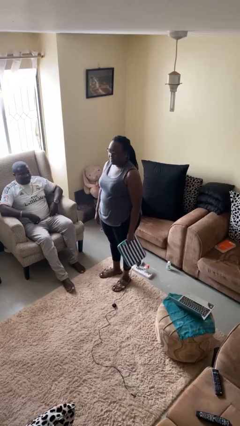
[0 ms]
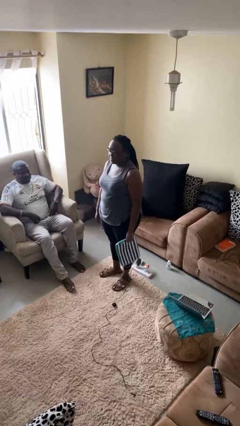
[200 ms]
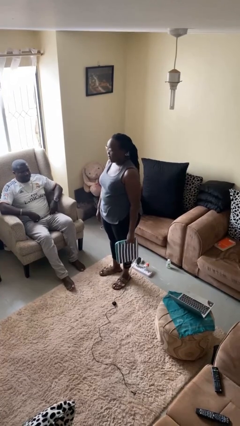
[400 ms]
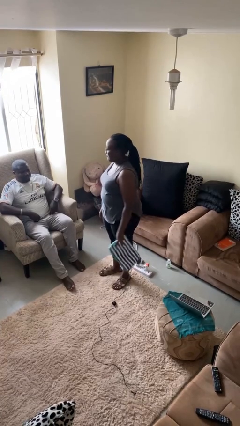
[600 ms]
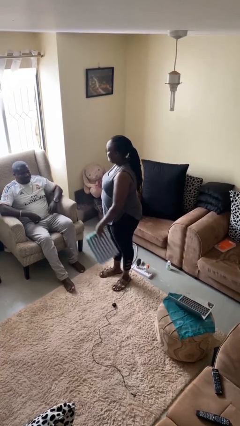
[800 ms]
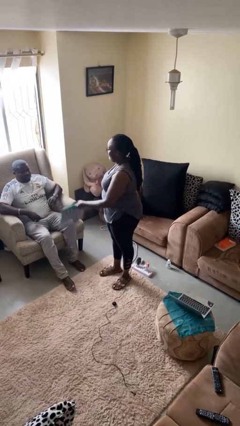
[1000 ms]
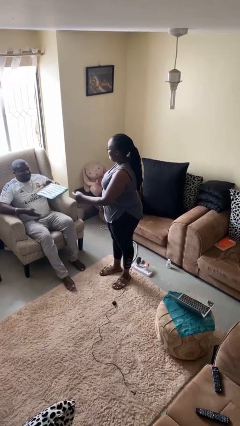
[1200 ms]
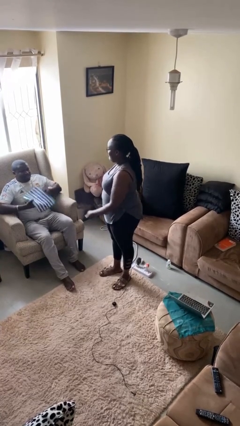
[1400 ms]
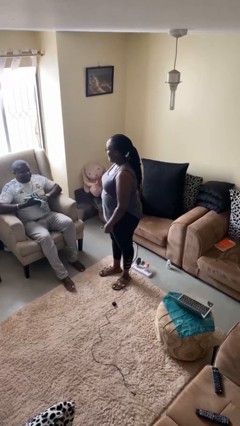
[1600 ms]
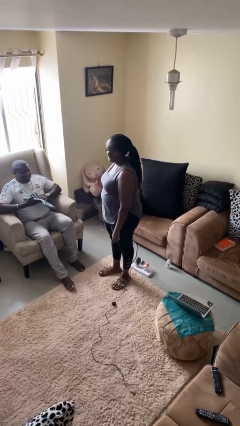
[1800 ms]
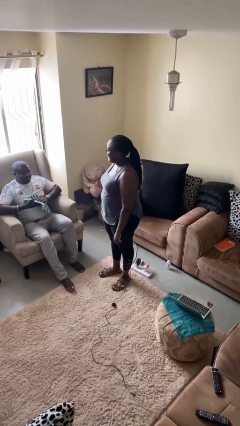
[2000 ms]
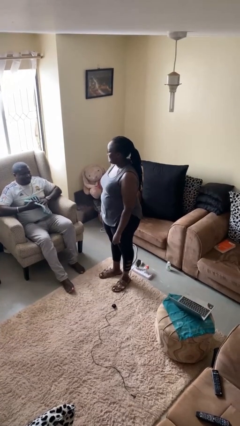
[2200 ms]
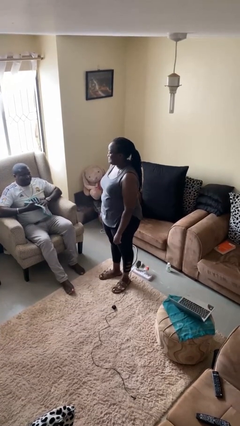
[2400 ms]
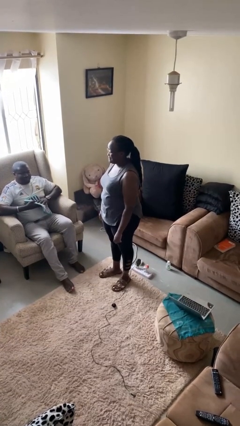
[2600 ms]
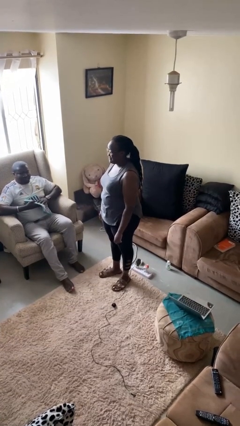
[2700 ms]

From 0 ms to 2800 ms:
person throws object to person

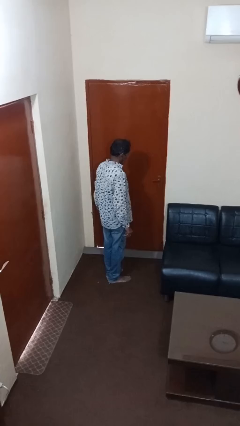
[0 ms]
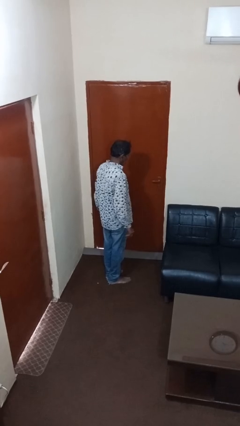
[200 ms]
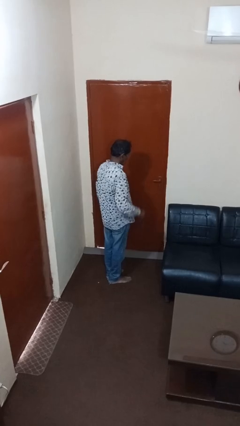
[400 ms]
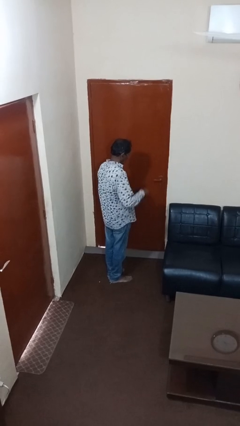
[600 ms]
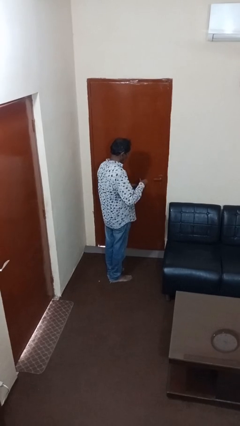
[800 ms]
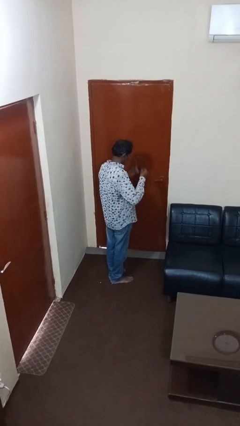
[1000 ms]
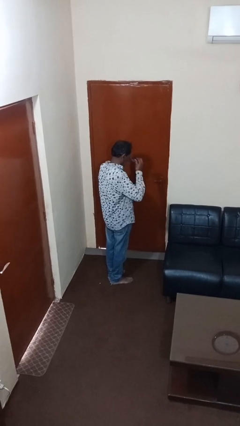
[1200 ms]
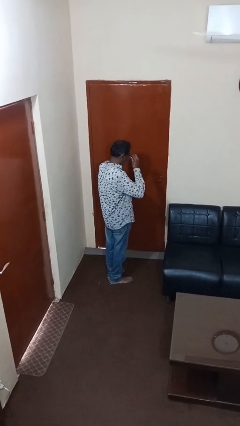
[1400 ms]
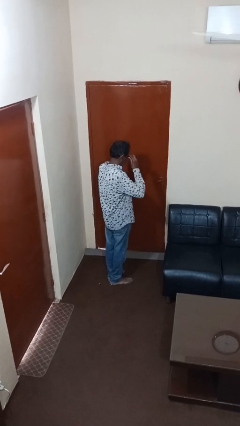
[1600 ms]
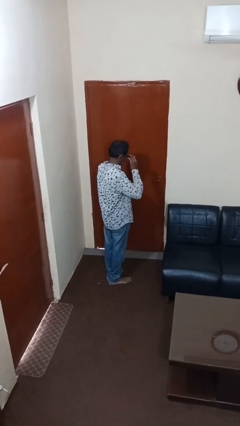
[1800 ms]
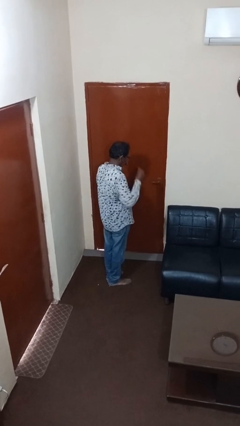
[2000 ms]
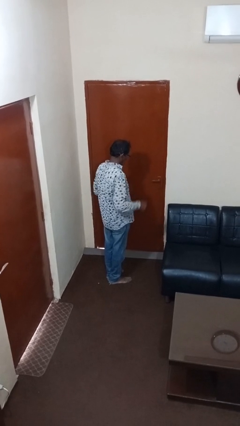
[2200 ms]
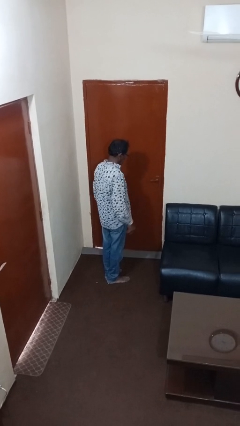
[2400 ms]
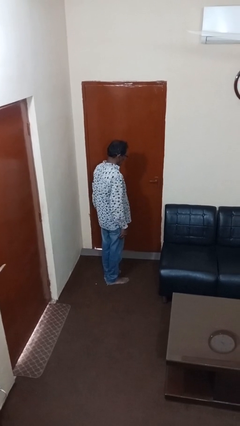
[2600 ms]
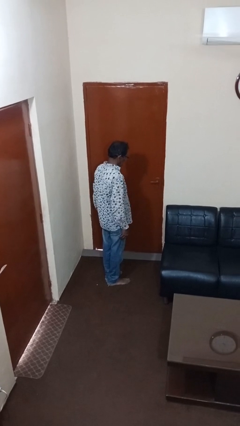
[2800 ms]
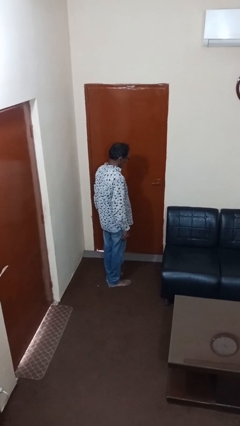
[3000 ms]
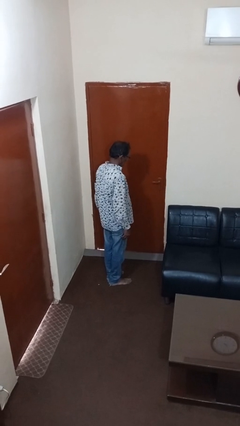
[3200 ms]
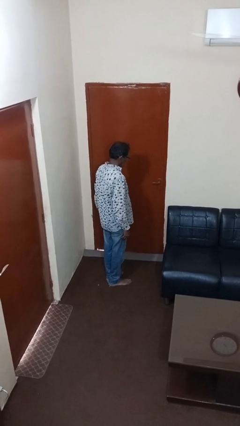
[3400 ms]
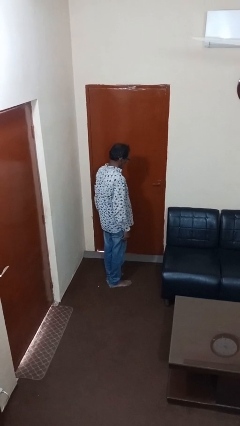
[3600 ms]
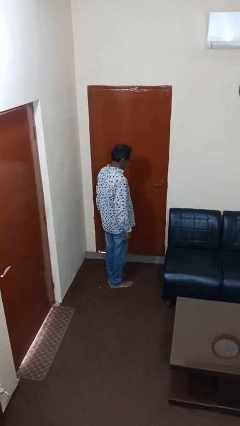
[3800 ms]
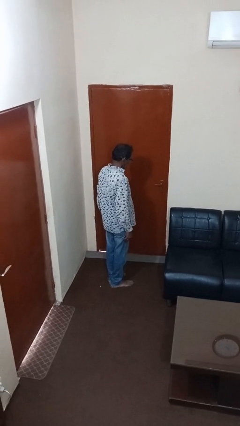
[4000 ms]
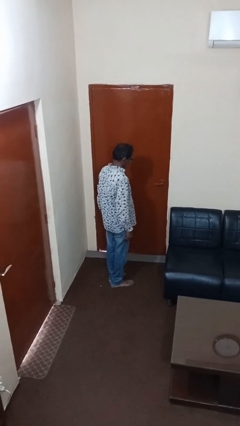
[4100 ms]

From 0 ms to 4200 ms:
person puts on glasses

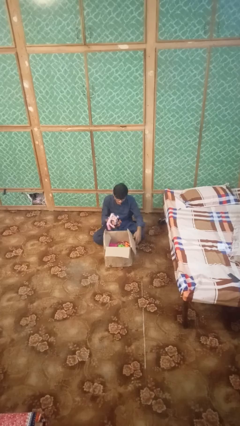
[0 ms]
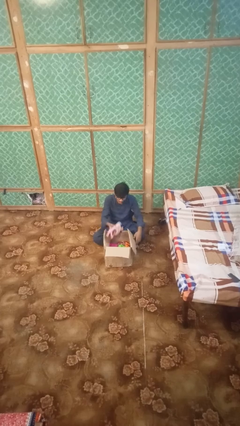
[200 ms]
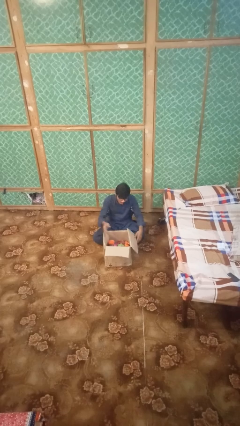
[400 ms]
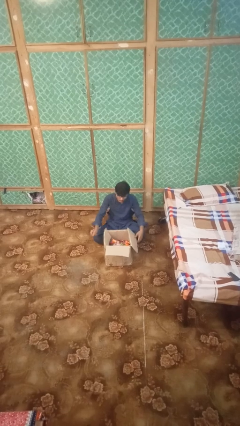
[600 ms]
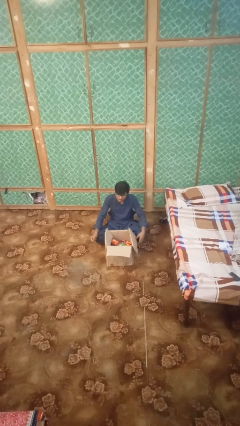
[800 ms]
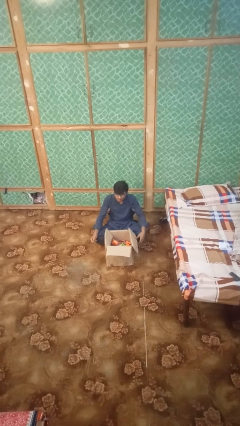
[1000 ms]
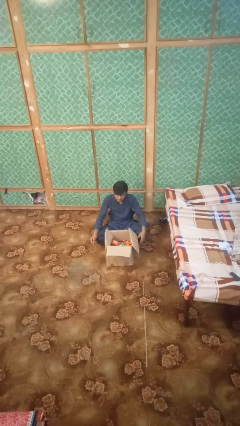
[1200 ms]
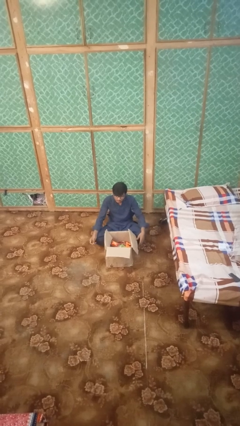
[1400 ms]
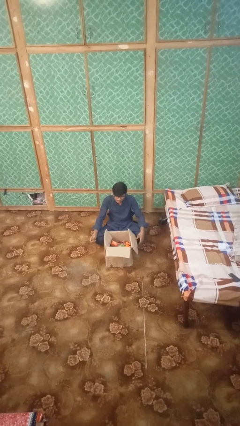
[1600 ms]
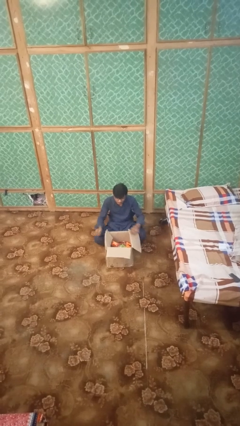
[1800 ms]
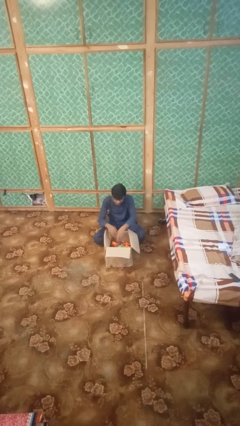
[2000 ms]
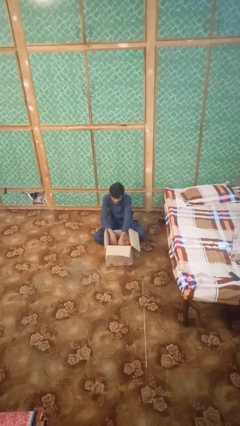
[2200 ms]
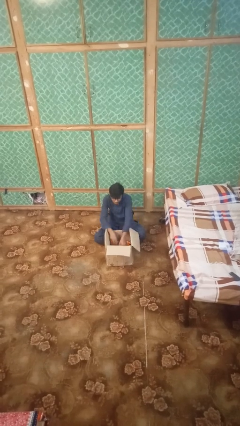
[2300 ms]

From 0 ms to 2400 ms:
person puts object into box

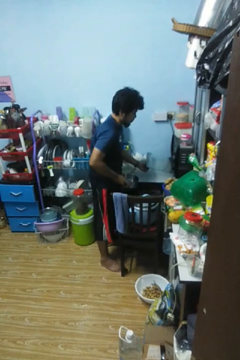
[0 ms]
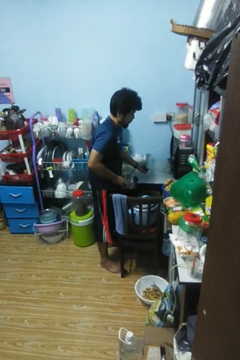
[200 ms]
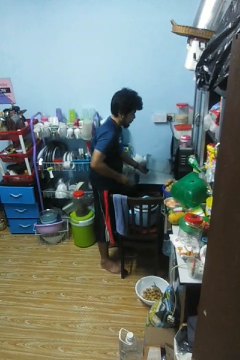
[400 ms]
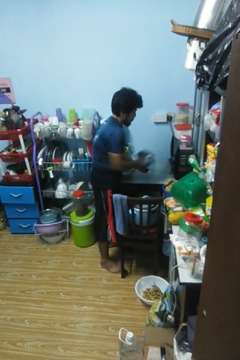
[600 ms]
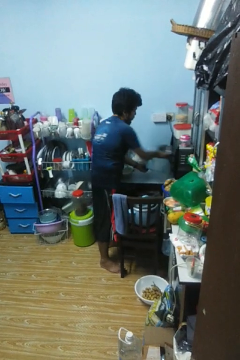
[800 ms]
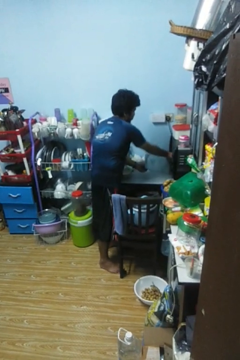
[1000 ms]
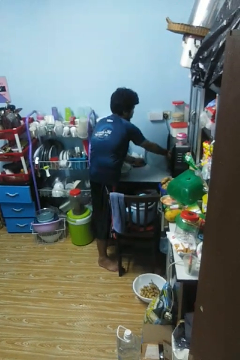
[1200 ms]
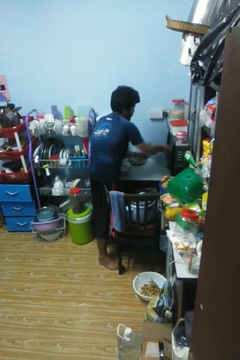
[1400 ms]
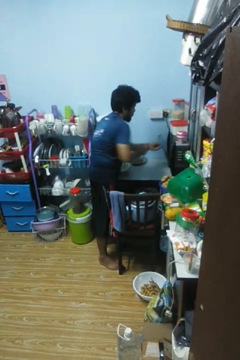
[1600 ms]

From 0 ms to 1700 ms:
person puts object into oven

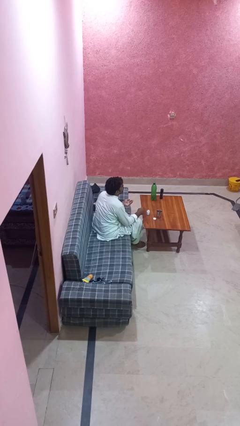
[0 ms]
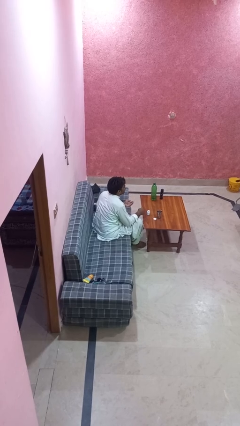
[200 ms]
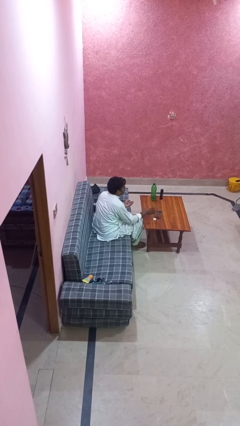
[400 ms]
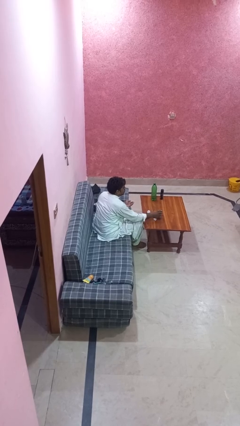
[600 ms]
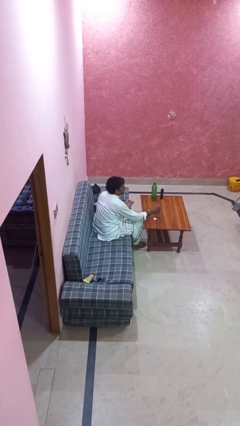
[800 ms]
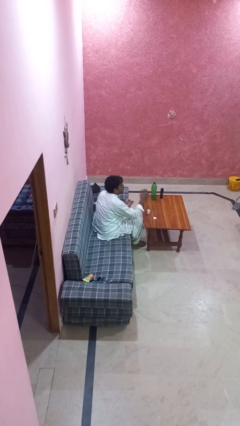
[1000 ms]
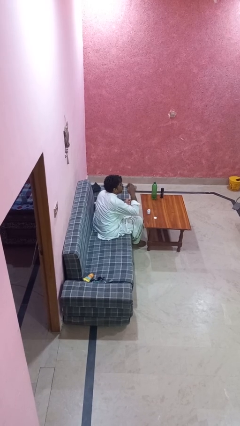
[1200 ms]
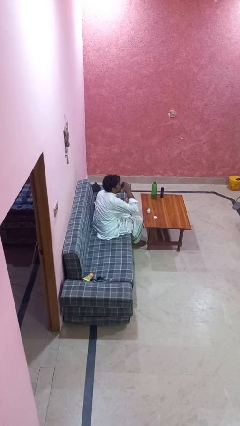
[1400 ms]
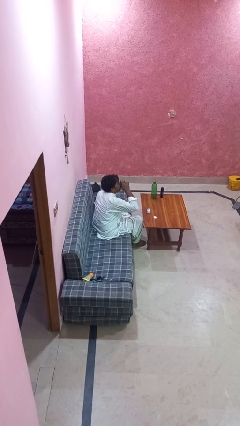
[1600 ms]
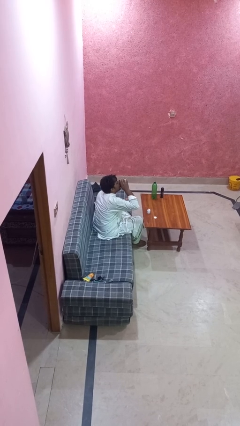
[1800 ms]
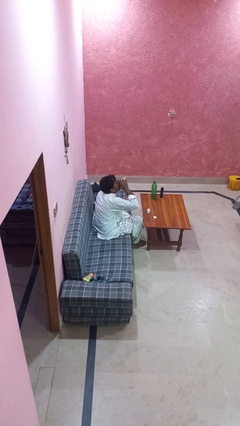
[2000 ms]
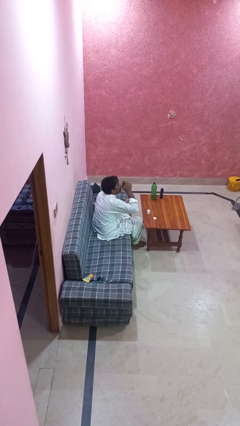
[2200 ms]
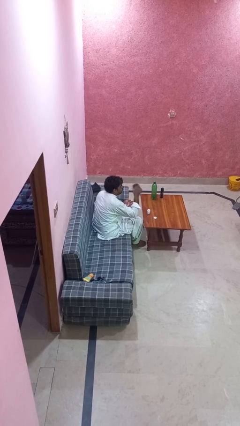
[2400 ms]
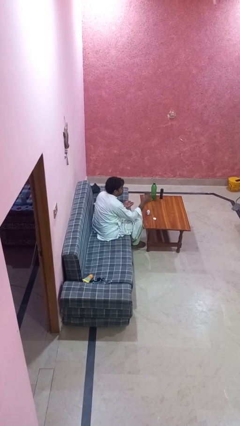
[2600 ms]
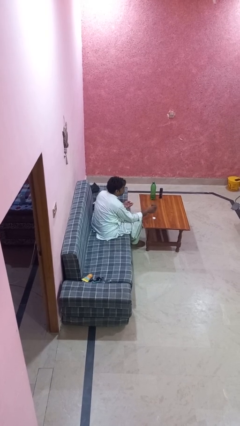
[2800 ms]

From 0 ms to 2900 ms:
person drinks from cup

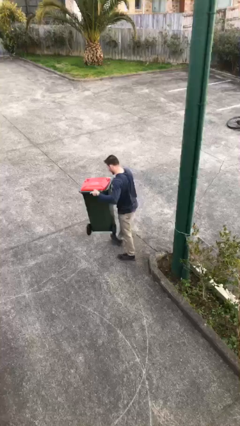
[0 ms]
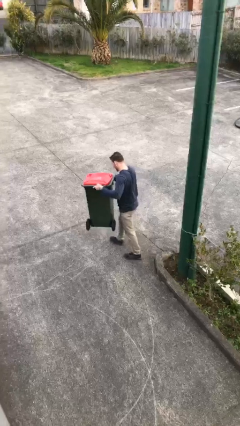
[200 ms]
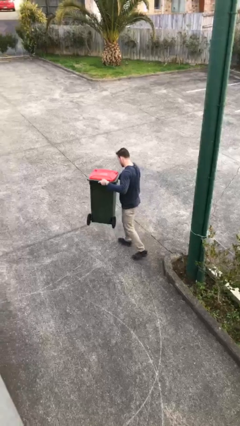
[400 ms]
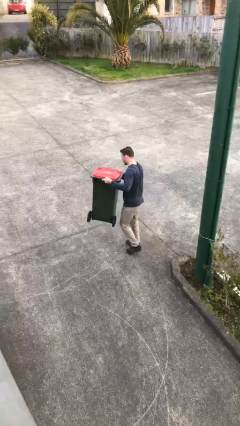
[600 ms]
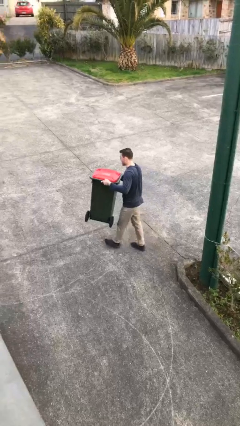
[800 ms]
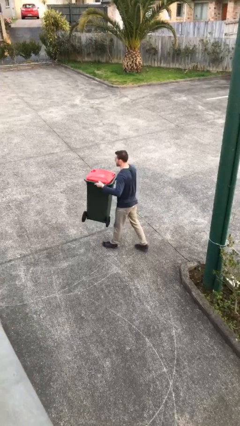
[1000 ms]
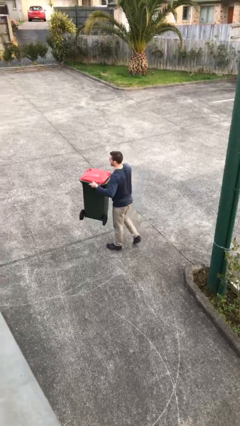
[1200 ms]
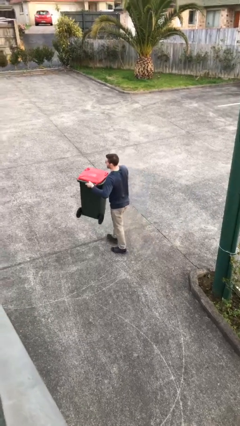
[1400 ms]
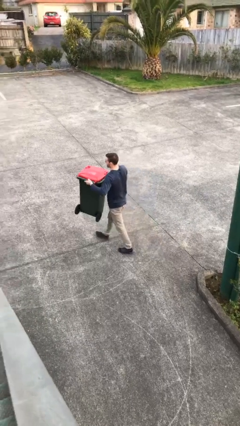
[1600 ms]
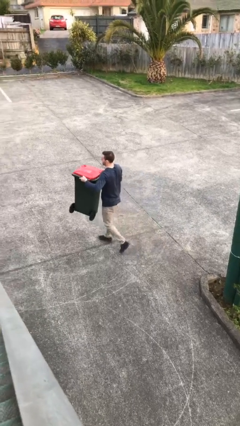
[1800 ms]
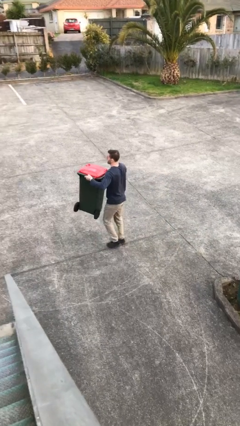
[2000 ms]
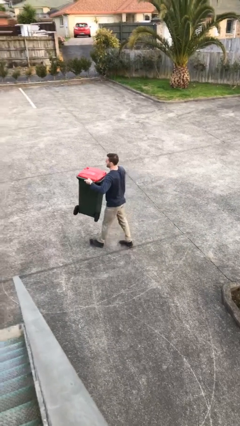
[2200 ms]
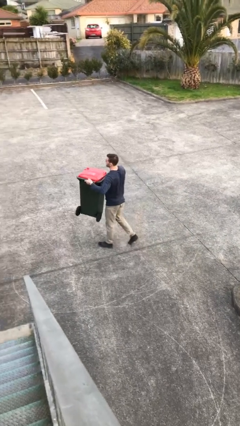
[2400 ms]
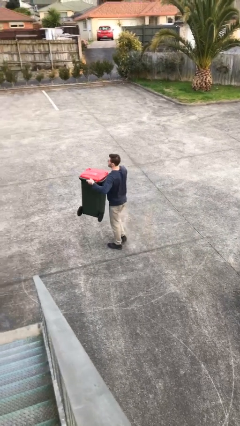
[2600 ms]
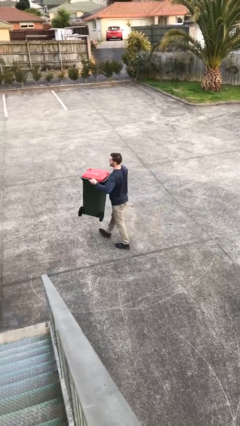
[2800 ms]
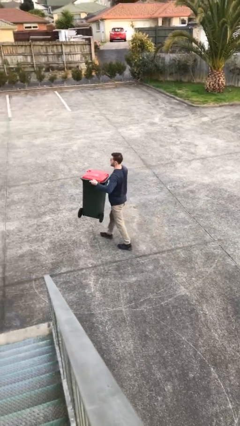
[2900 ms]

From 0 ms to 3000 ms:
person carries heavy object

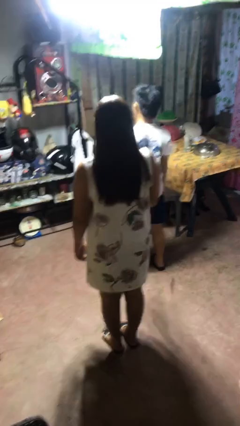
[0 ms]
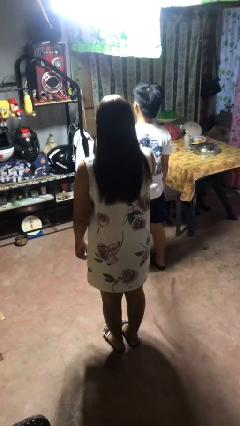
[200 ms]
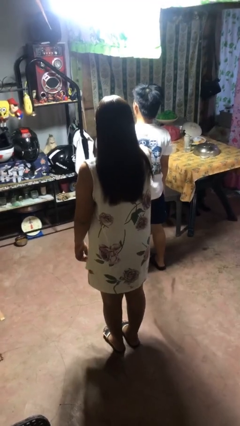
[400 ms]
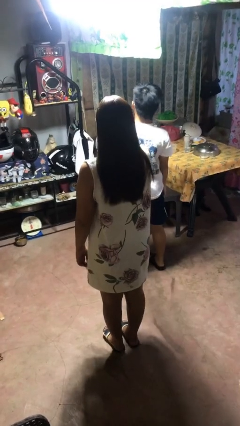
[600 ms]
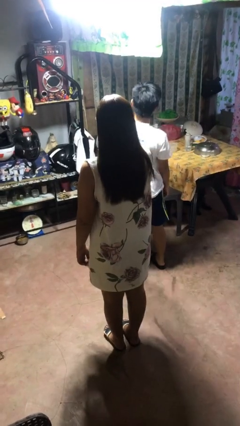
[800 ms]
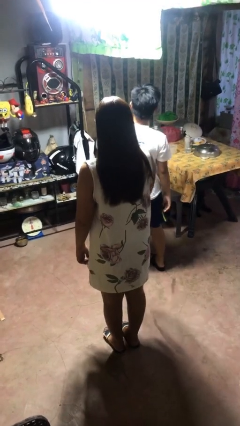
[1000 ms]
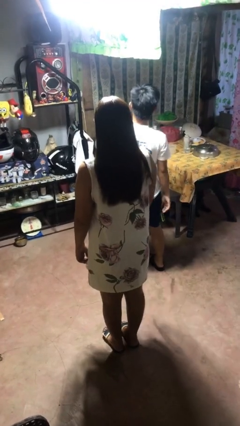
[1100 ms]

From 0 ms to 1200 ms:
person shoves person

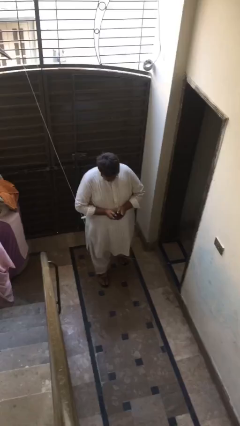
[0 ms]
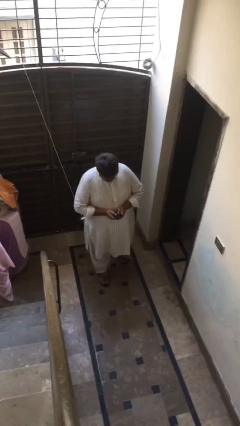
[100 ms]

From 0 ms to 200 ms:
person talks on phone
